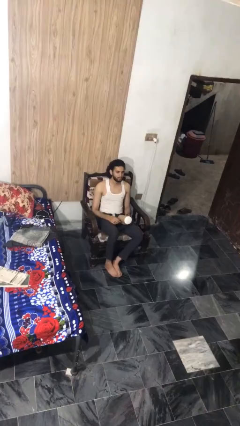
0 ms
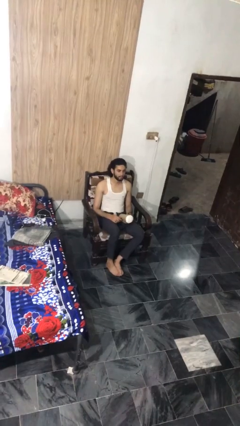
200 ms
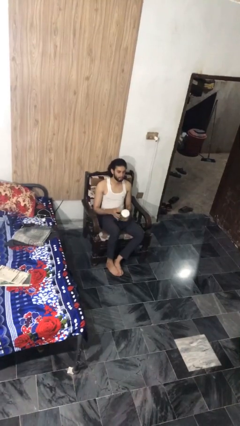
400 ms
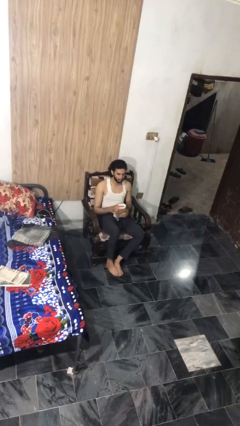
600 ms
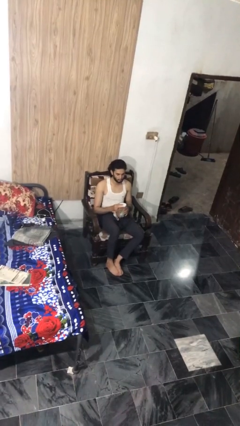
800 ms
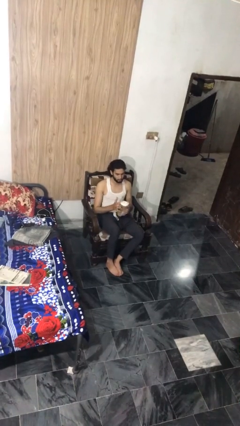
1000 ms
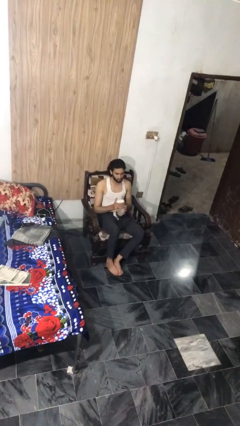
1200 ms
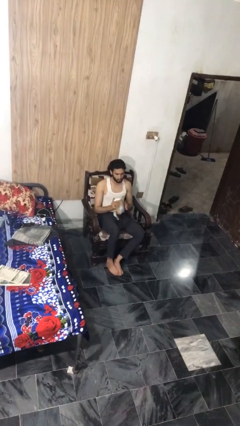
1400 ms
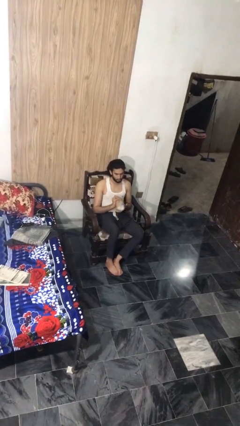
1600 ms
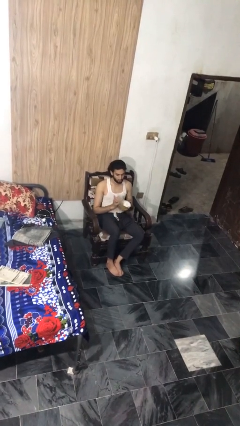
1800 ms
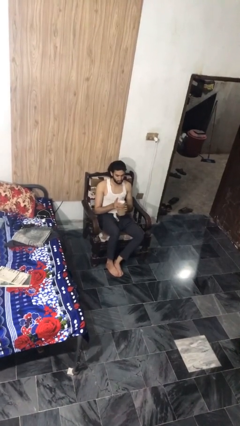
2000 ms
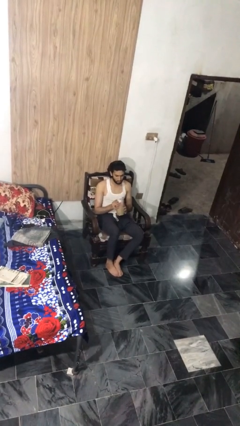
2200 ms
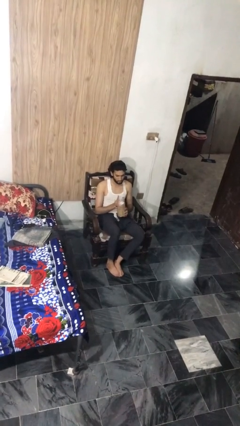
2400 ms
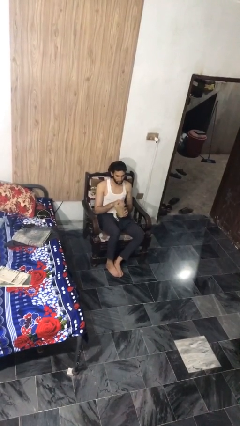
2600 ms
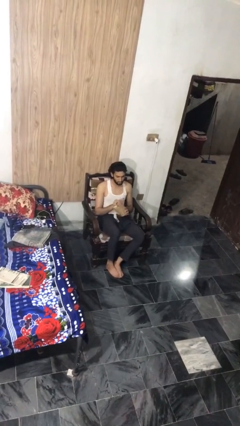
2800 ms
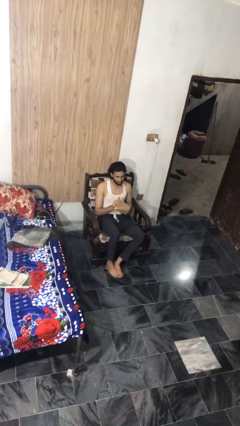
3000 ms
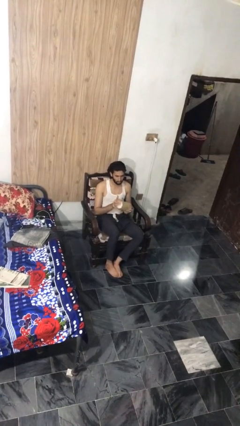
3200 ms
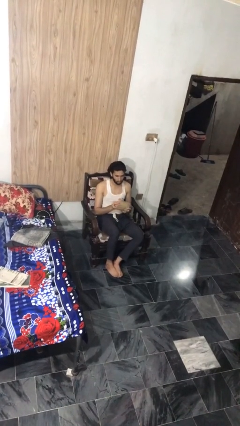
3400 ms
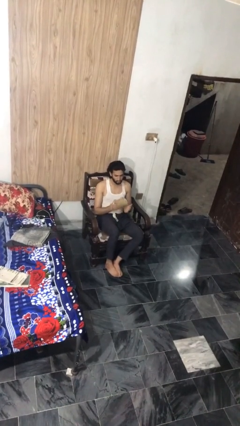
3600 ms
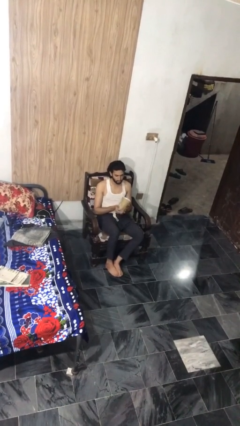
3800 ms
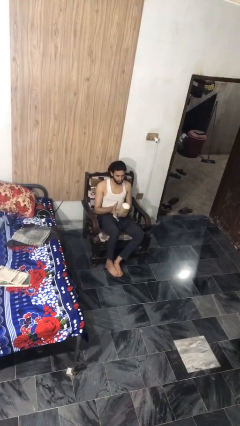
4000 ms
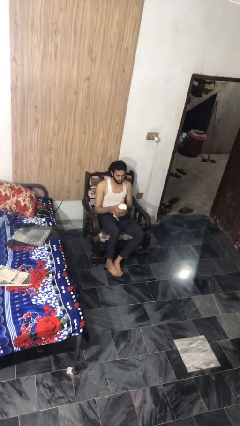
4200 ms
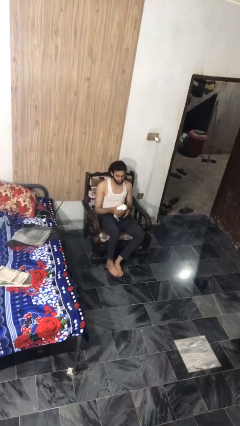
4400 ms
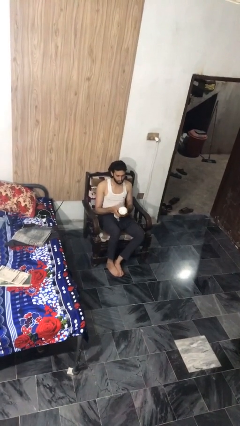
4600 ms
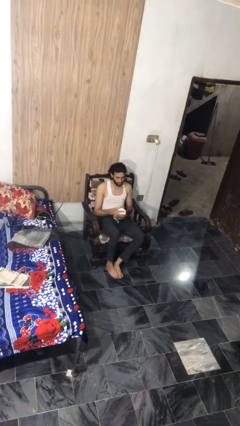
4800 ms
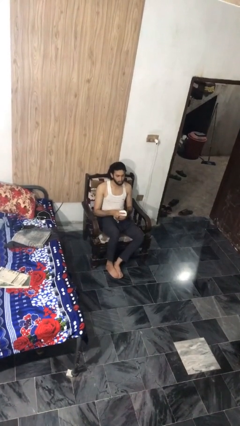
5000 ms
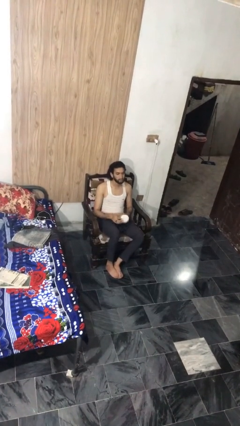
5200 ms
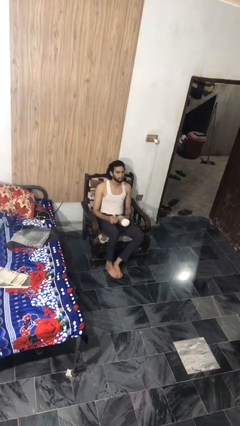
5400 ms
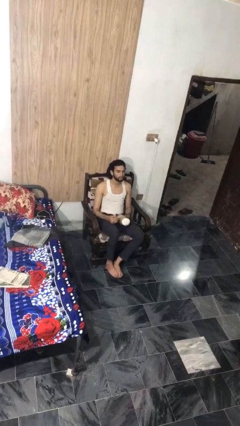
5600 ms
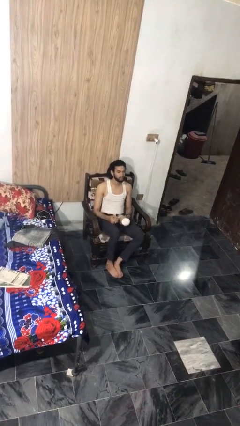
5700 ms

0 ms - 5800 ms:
person squeezes object

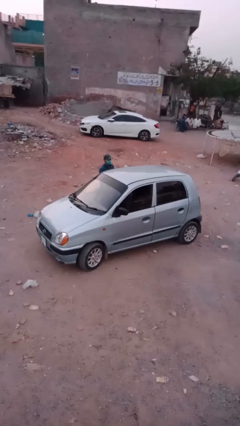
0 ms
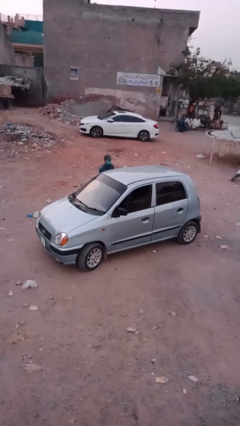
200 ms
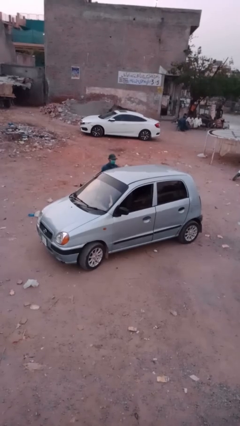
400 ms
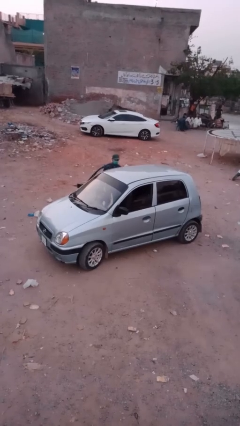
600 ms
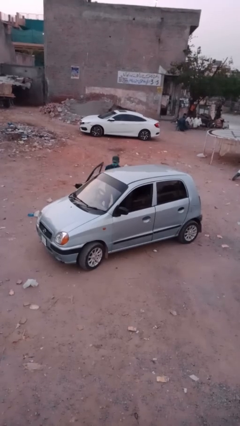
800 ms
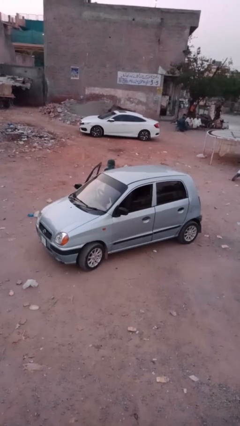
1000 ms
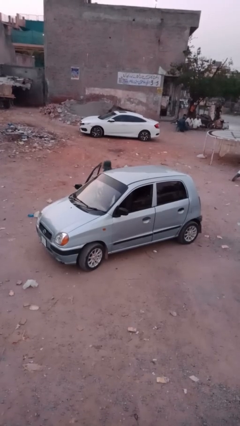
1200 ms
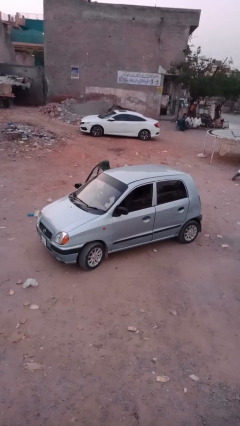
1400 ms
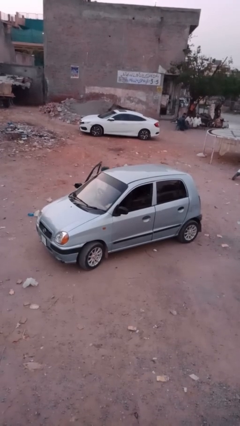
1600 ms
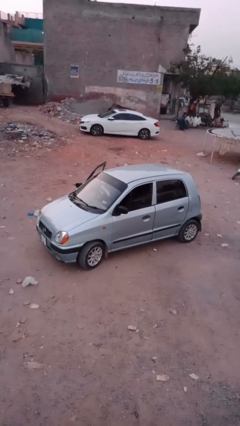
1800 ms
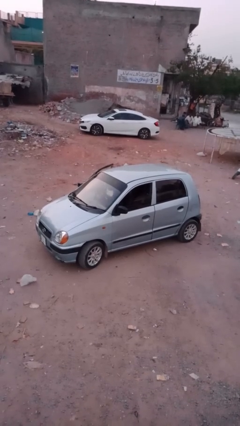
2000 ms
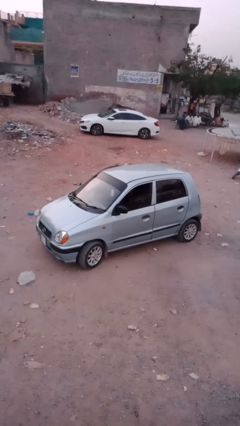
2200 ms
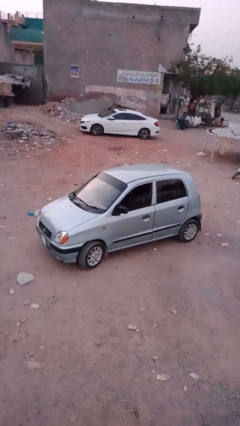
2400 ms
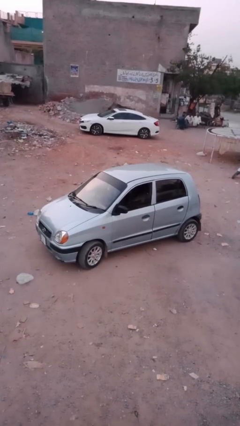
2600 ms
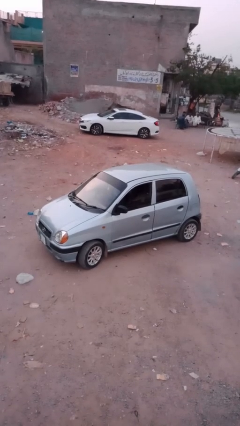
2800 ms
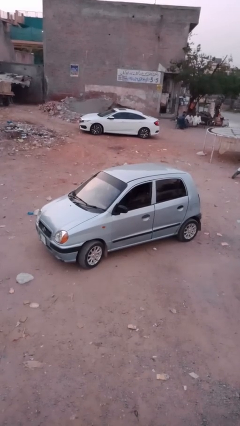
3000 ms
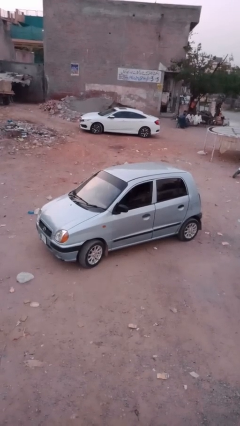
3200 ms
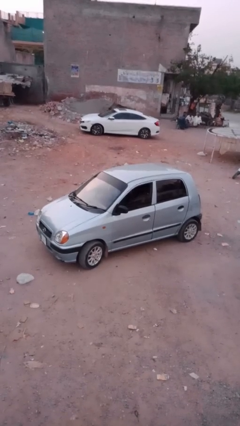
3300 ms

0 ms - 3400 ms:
car picks up person

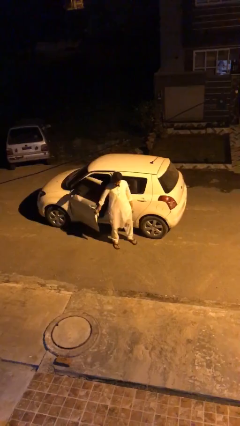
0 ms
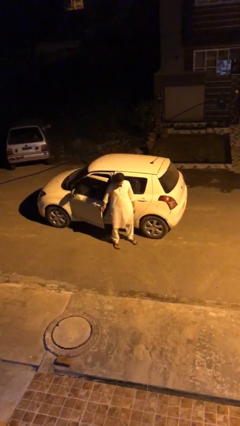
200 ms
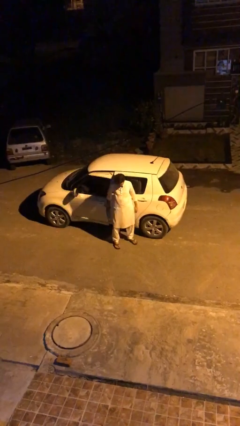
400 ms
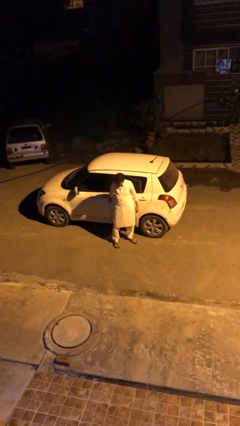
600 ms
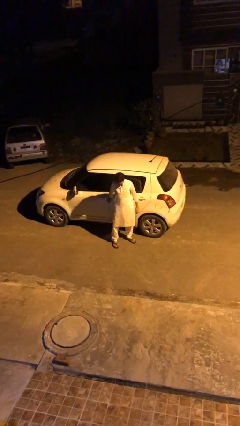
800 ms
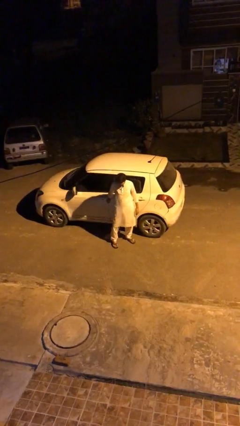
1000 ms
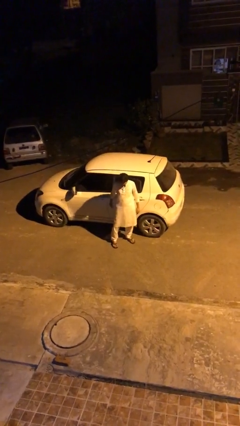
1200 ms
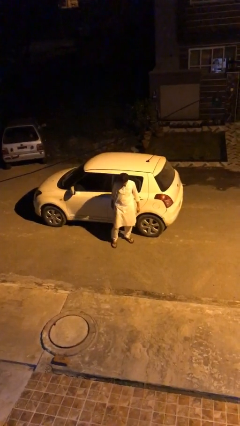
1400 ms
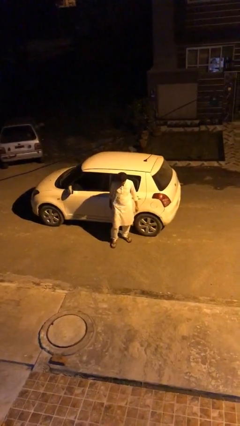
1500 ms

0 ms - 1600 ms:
person closes car door

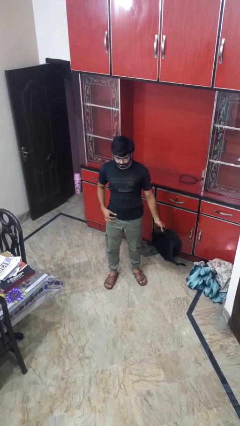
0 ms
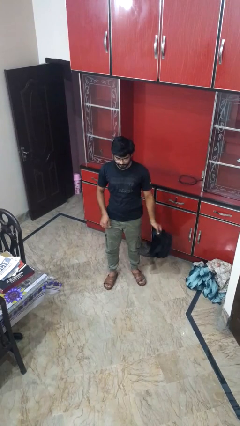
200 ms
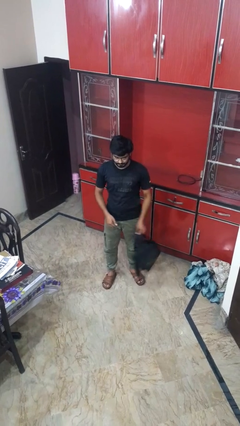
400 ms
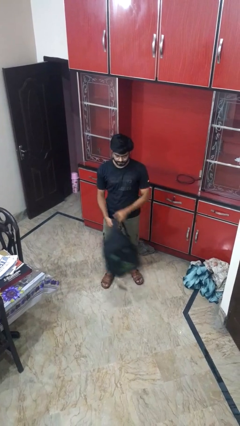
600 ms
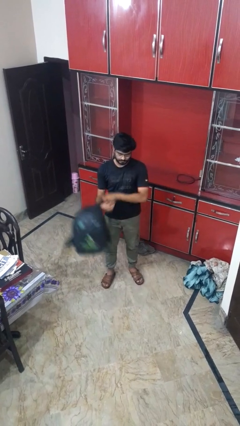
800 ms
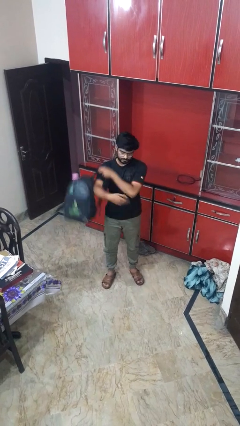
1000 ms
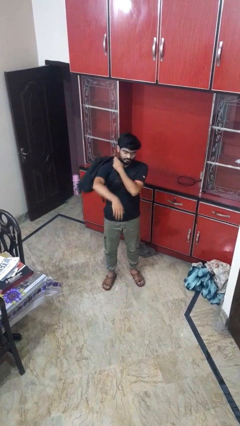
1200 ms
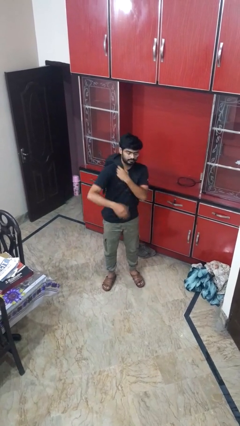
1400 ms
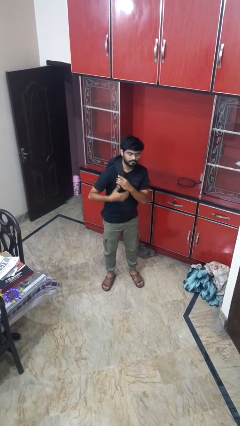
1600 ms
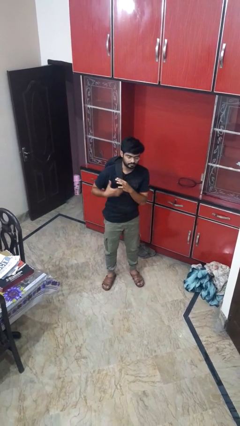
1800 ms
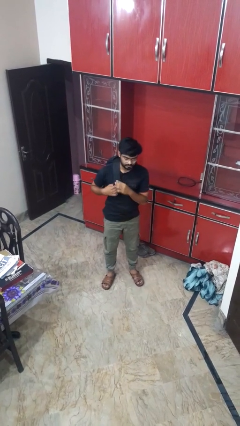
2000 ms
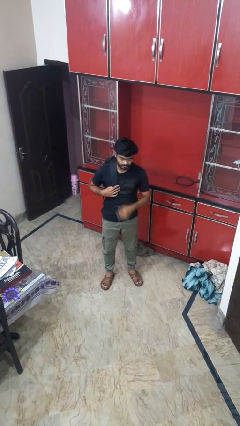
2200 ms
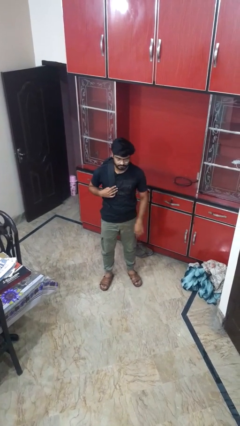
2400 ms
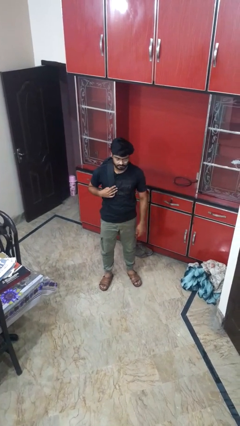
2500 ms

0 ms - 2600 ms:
person puts on backpack

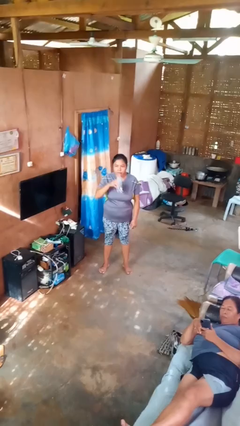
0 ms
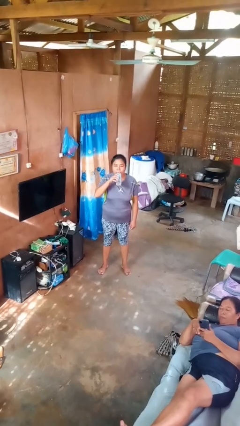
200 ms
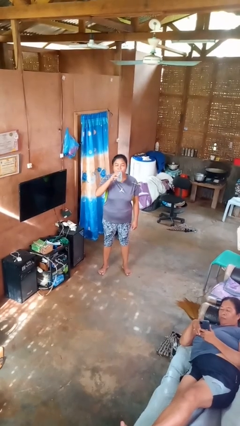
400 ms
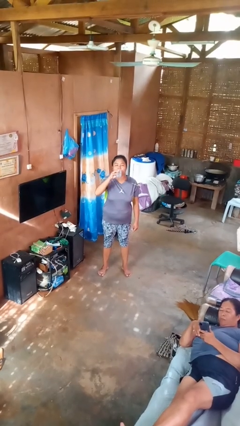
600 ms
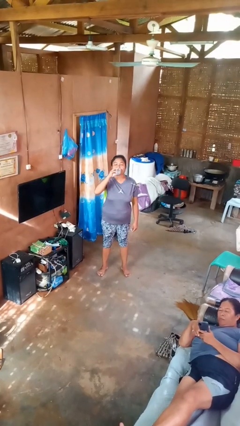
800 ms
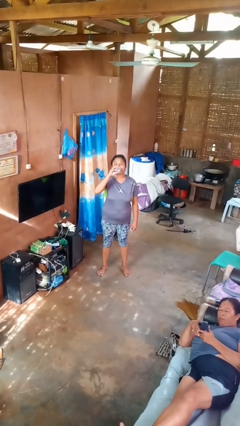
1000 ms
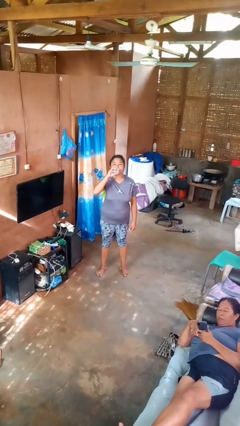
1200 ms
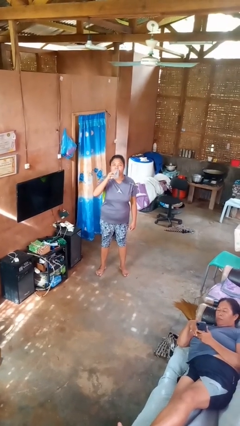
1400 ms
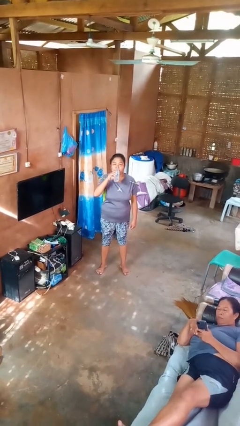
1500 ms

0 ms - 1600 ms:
person drinks from bottle

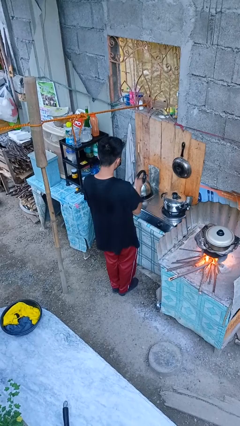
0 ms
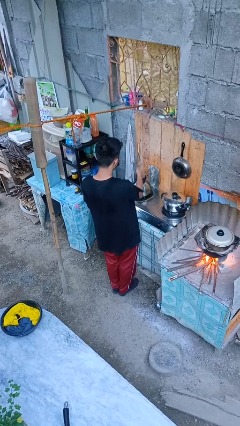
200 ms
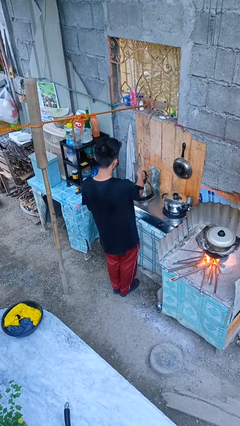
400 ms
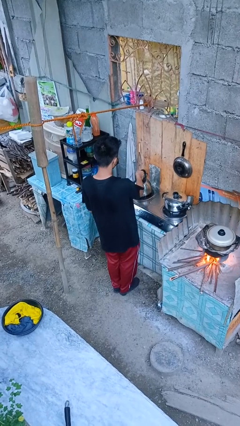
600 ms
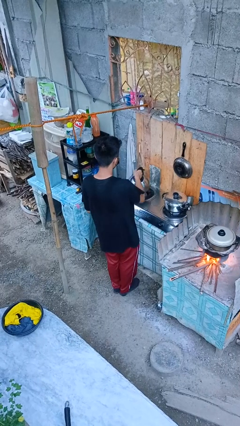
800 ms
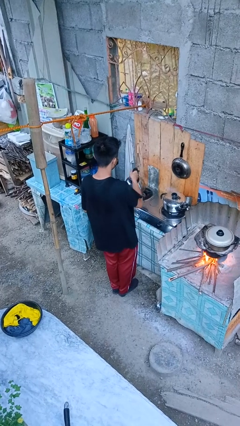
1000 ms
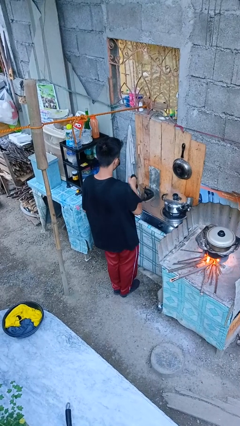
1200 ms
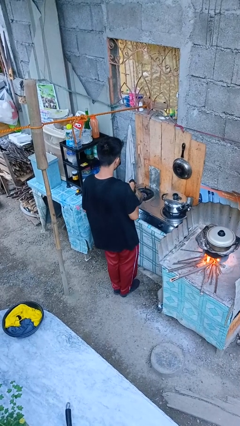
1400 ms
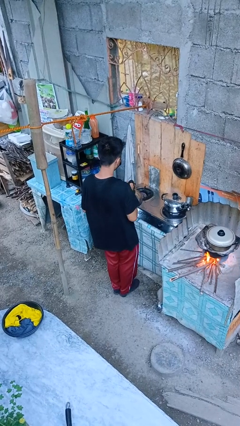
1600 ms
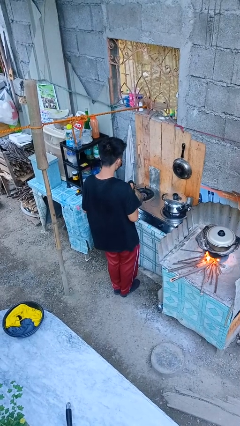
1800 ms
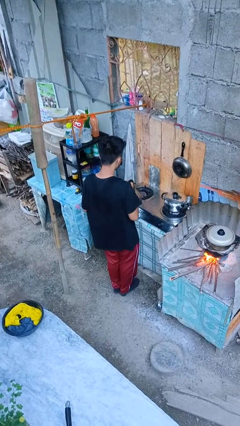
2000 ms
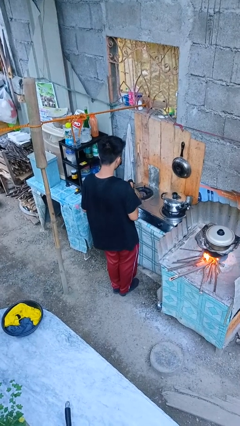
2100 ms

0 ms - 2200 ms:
person picks up object from countertop
